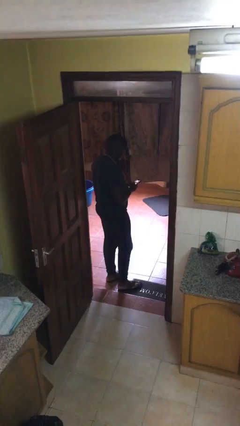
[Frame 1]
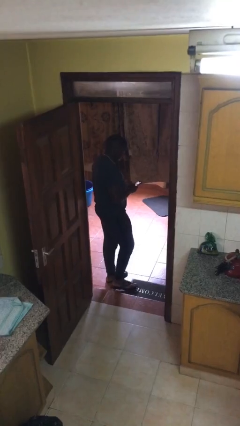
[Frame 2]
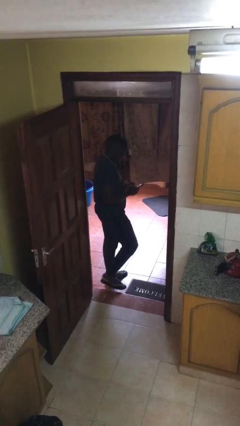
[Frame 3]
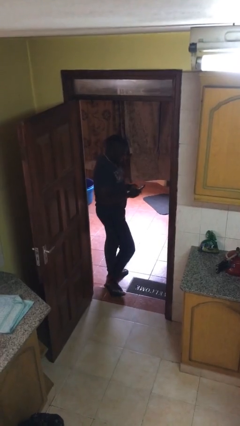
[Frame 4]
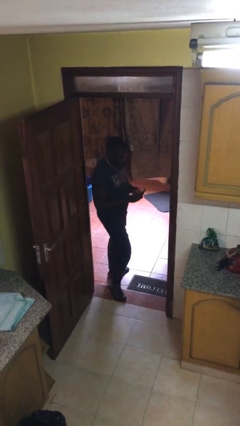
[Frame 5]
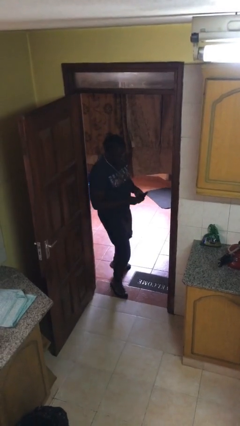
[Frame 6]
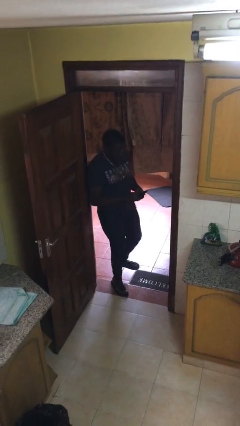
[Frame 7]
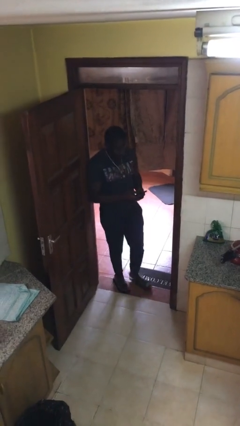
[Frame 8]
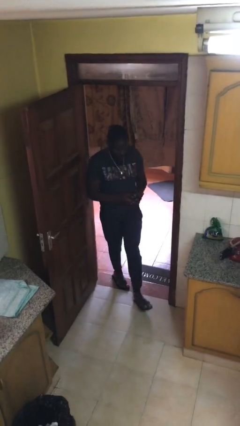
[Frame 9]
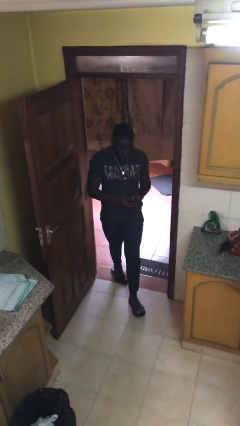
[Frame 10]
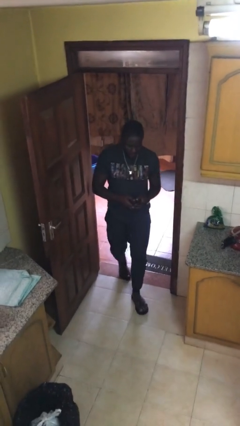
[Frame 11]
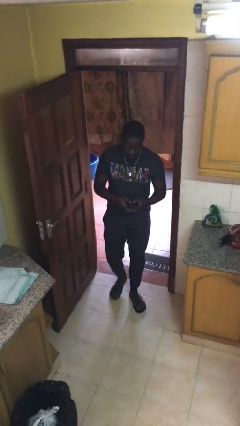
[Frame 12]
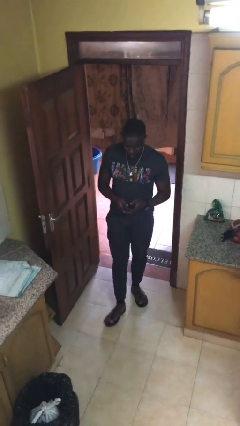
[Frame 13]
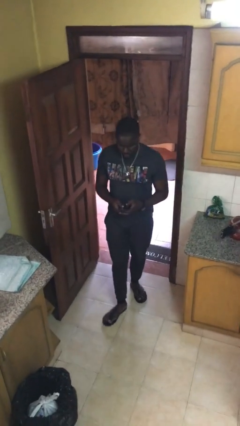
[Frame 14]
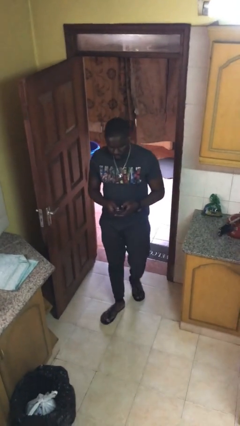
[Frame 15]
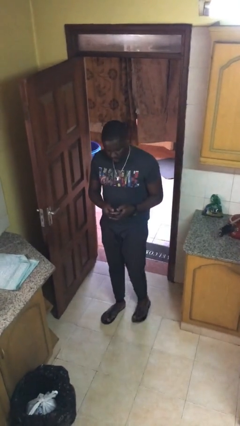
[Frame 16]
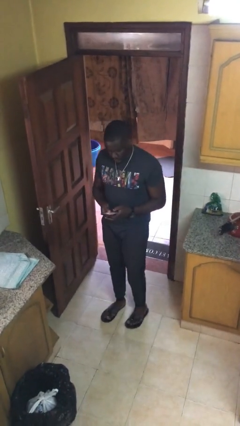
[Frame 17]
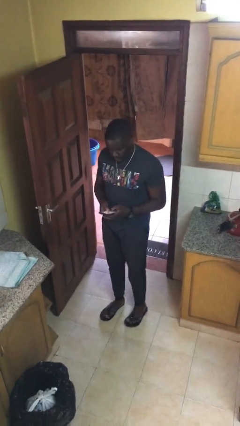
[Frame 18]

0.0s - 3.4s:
person enters scene through structure

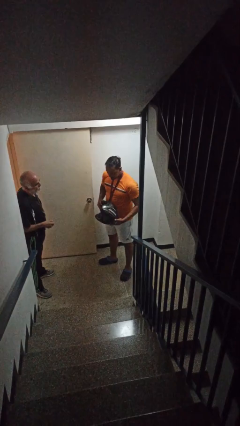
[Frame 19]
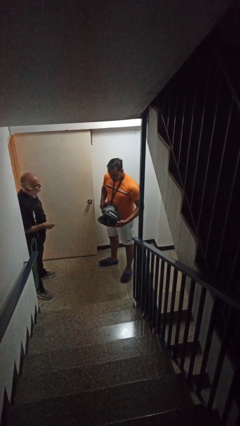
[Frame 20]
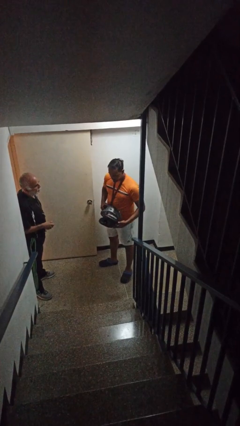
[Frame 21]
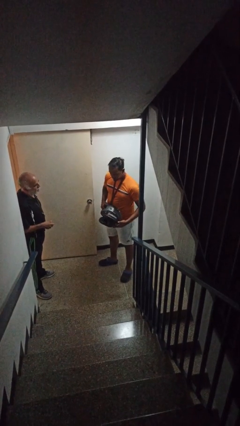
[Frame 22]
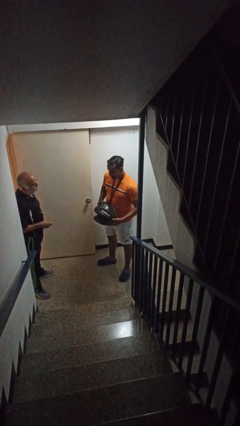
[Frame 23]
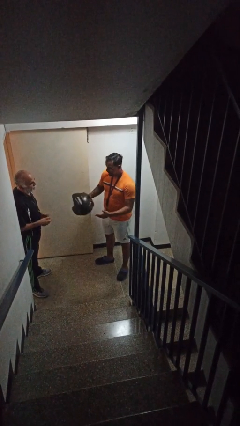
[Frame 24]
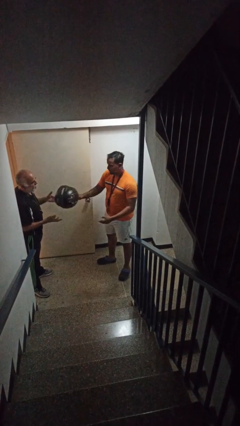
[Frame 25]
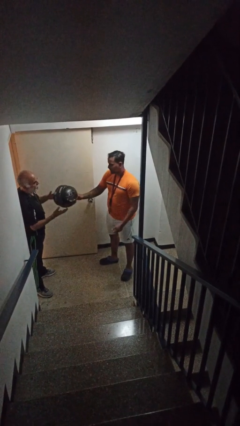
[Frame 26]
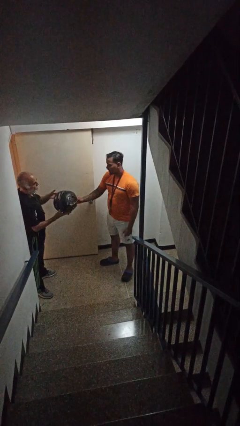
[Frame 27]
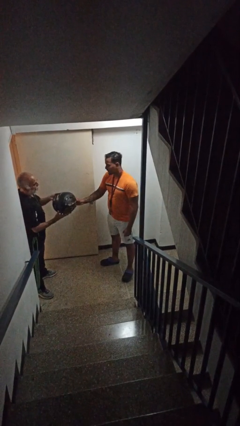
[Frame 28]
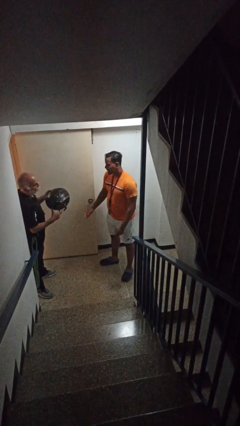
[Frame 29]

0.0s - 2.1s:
person transfers object to person

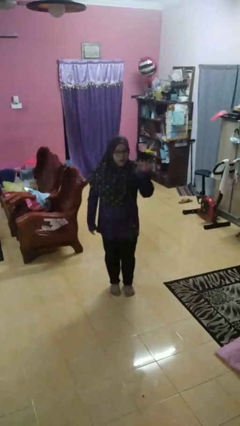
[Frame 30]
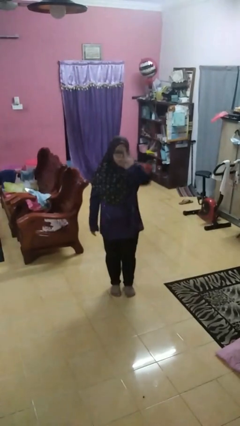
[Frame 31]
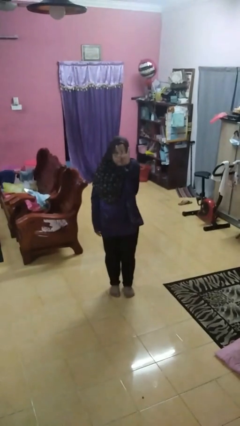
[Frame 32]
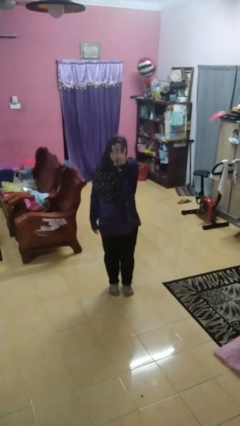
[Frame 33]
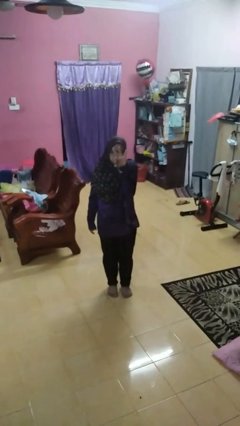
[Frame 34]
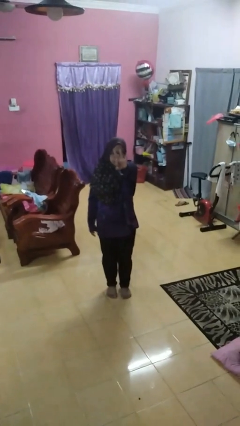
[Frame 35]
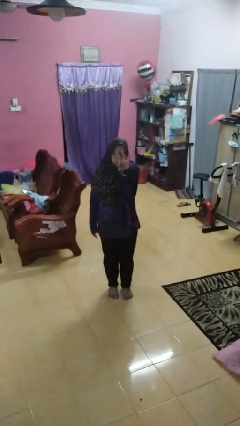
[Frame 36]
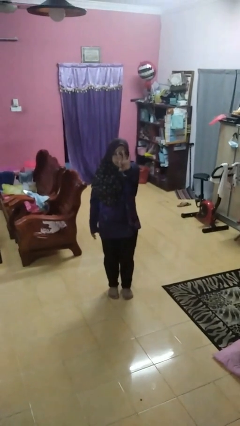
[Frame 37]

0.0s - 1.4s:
person gestures number three

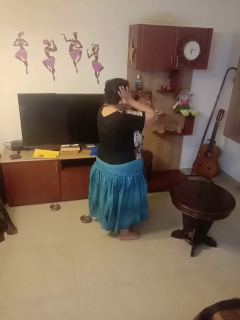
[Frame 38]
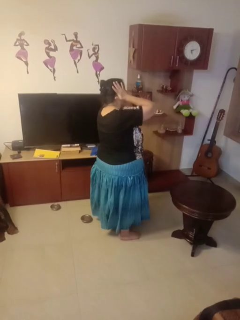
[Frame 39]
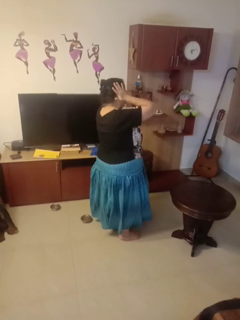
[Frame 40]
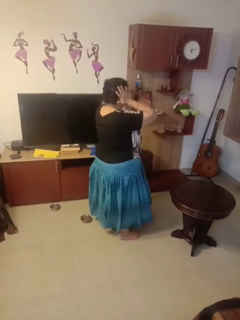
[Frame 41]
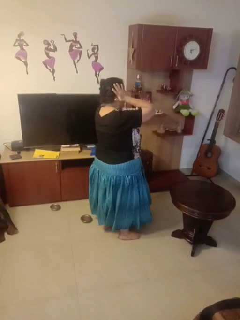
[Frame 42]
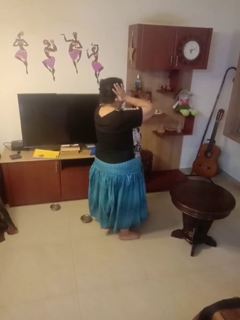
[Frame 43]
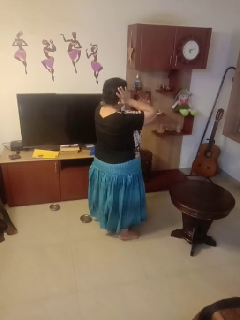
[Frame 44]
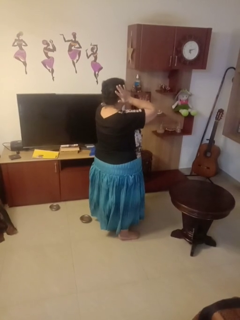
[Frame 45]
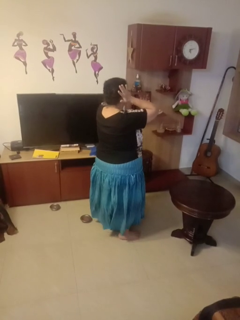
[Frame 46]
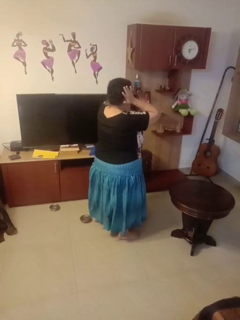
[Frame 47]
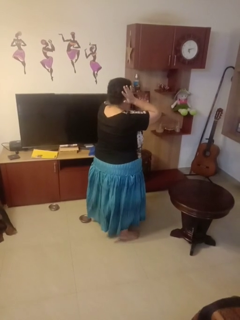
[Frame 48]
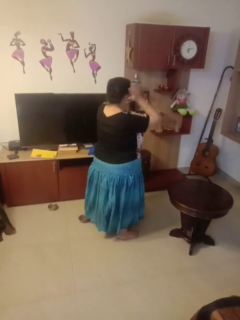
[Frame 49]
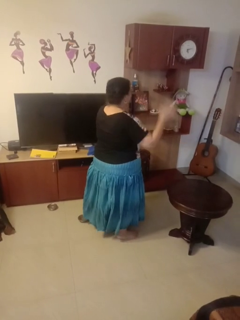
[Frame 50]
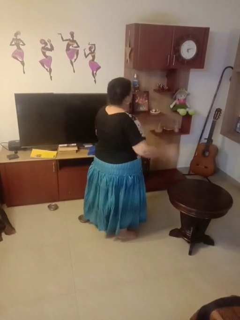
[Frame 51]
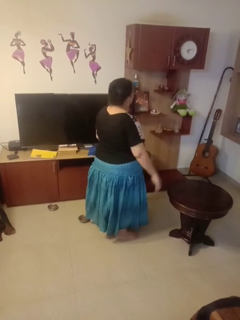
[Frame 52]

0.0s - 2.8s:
person puts fingers in ear

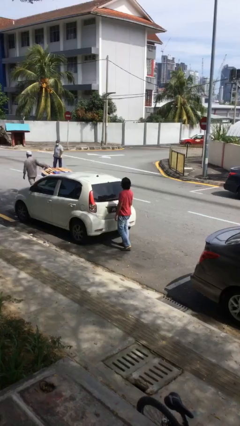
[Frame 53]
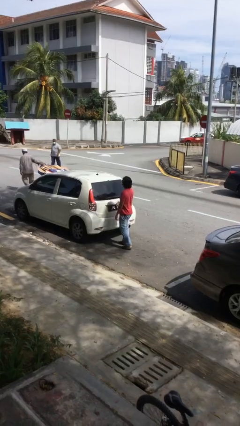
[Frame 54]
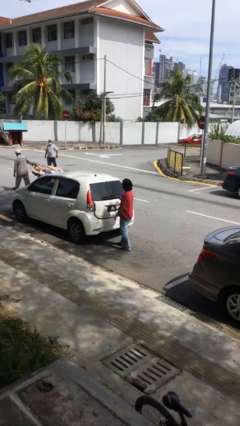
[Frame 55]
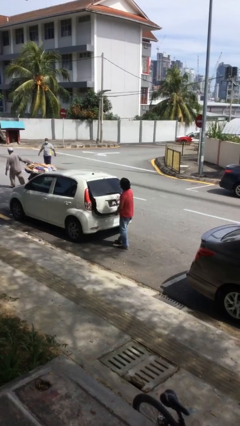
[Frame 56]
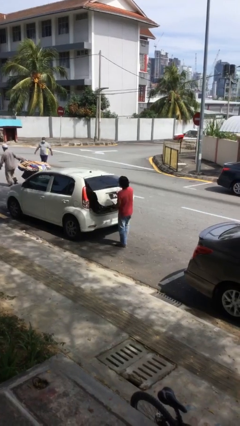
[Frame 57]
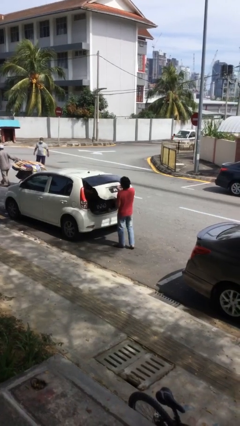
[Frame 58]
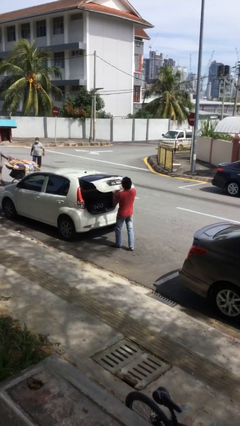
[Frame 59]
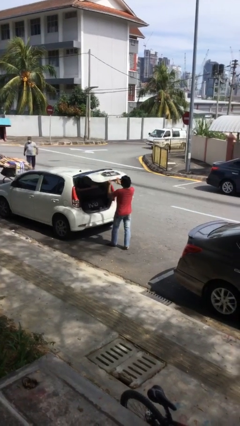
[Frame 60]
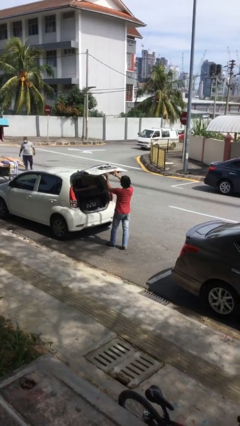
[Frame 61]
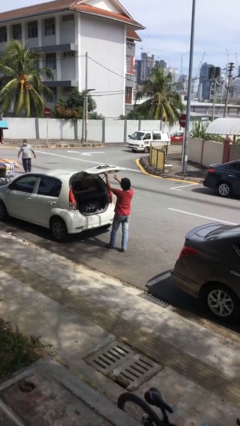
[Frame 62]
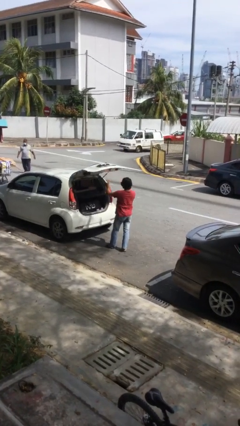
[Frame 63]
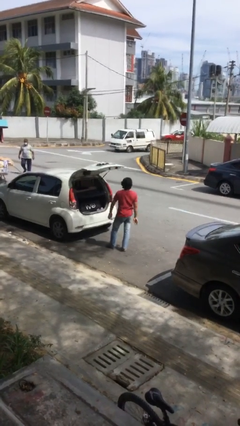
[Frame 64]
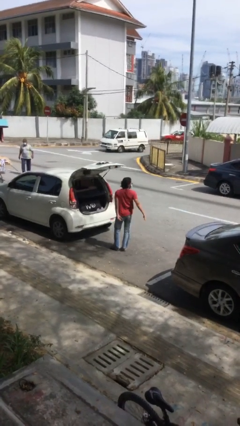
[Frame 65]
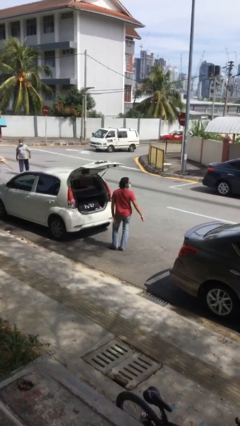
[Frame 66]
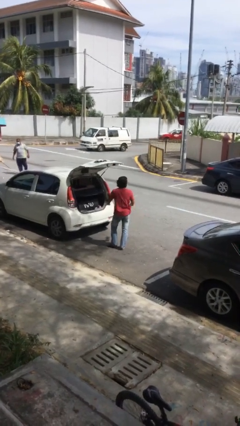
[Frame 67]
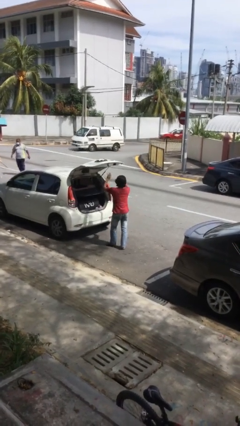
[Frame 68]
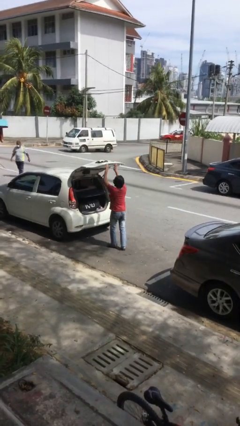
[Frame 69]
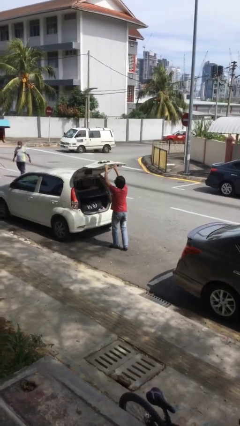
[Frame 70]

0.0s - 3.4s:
person opens car trunk

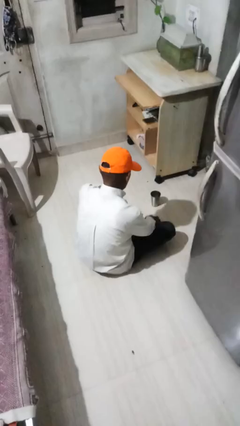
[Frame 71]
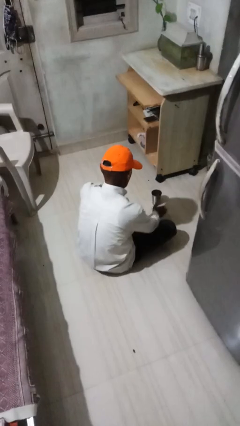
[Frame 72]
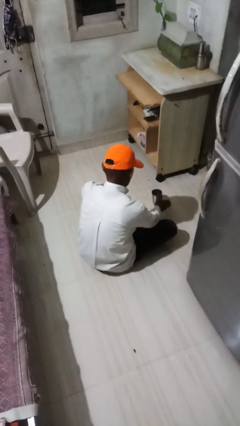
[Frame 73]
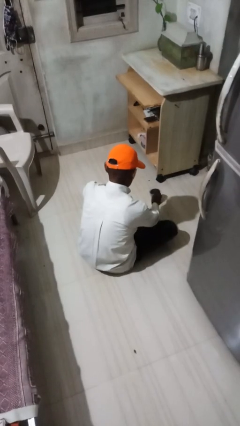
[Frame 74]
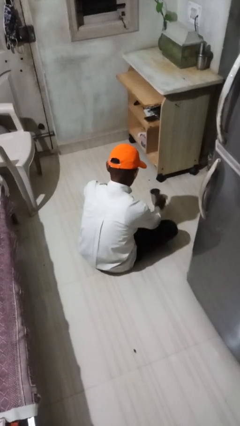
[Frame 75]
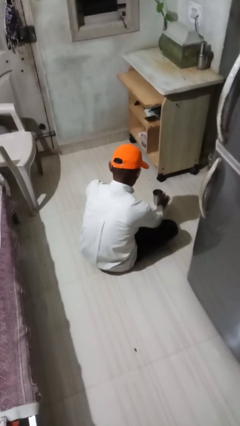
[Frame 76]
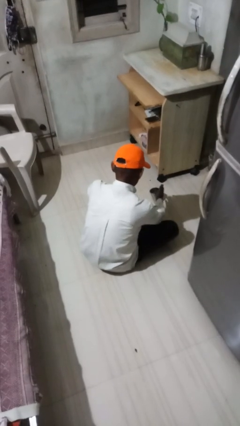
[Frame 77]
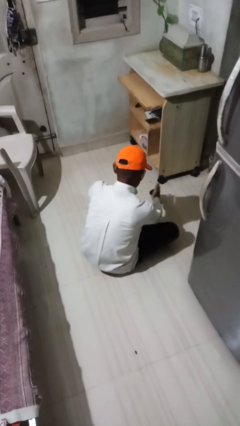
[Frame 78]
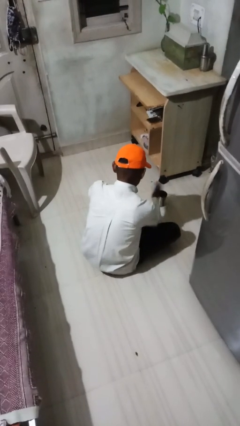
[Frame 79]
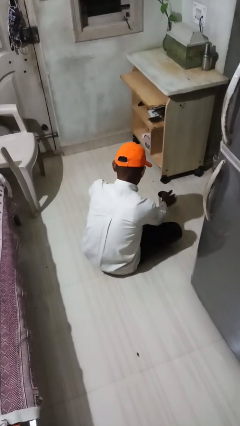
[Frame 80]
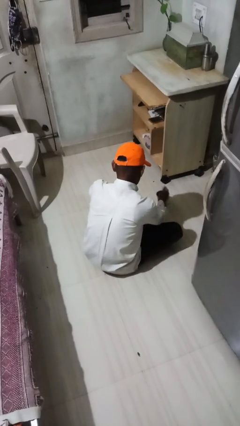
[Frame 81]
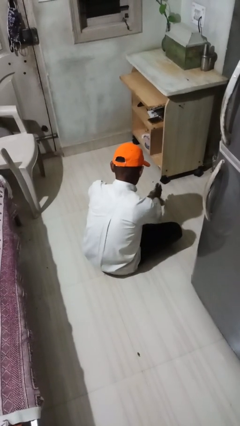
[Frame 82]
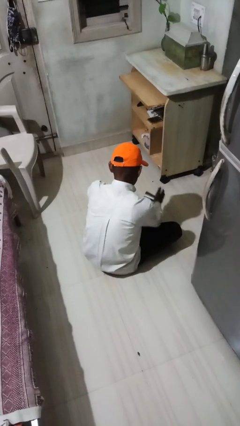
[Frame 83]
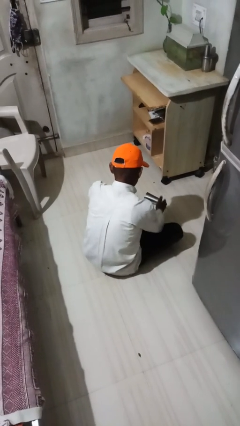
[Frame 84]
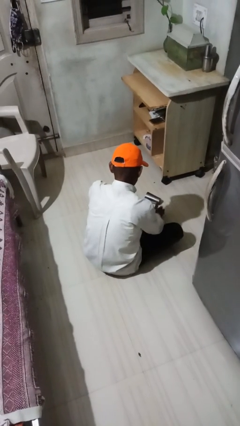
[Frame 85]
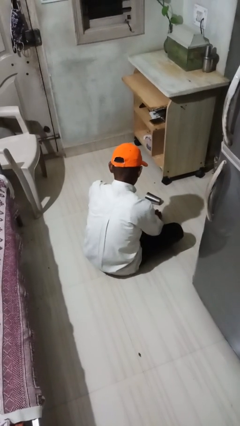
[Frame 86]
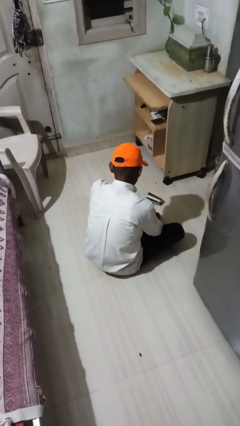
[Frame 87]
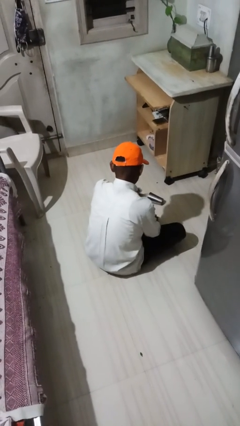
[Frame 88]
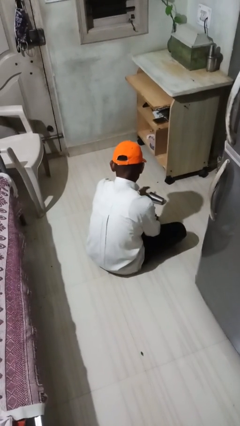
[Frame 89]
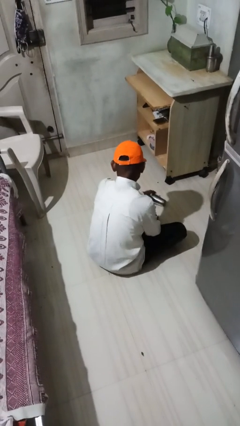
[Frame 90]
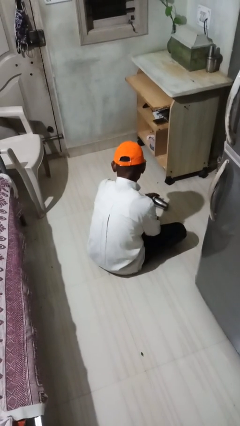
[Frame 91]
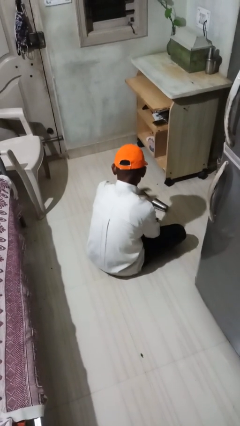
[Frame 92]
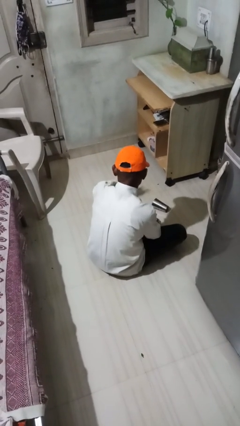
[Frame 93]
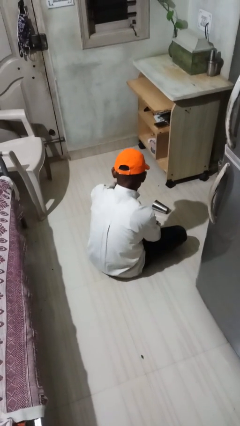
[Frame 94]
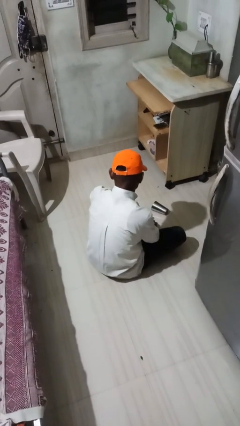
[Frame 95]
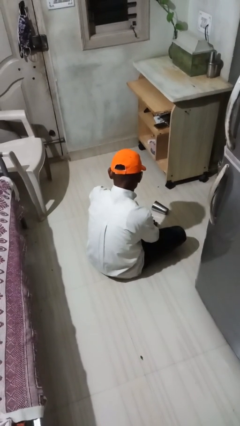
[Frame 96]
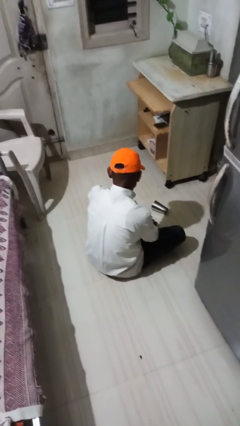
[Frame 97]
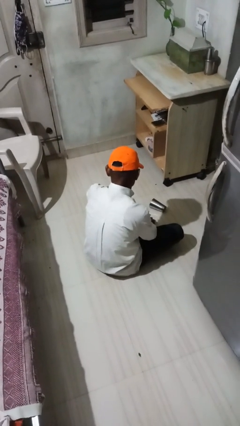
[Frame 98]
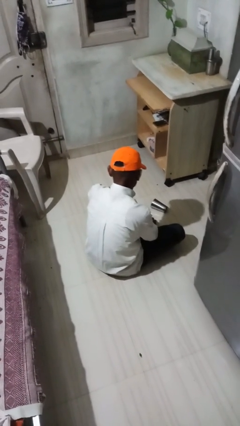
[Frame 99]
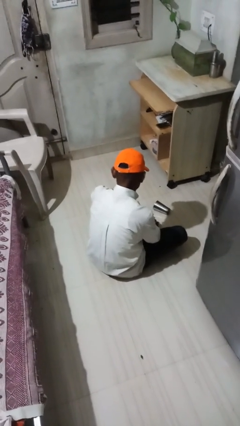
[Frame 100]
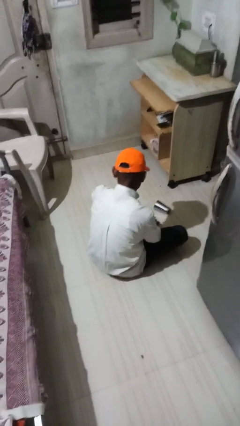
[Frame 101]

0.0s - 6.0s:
person spills on floor
